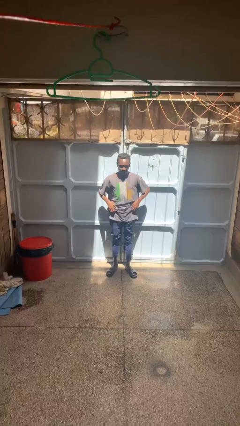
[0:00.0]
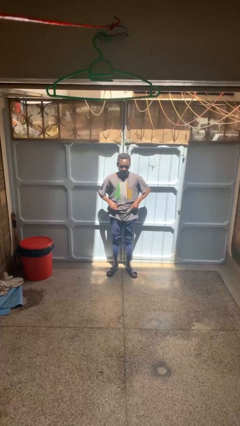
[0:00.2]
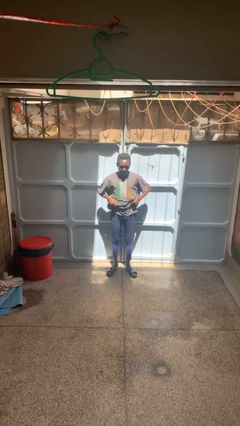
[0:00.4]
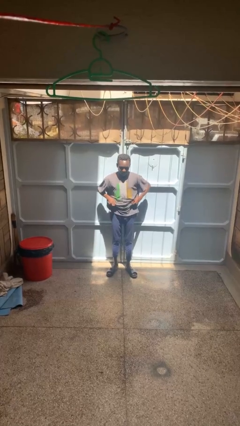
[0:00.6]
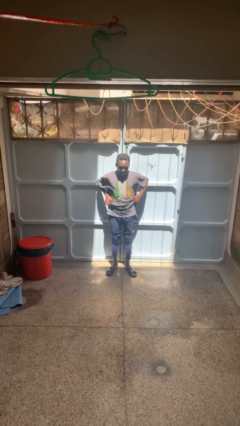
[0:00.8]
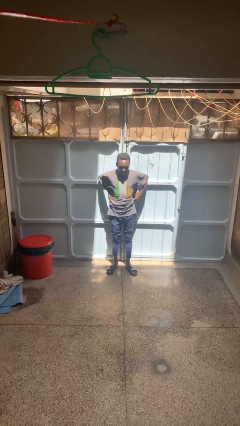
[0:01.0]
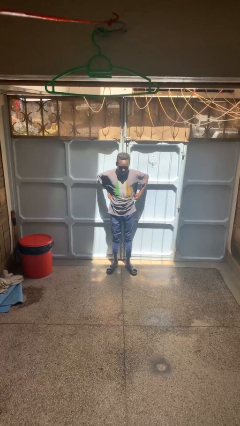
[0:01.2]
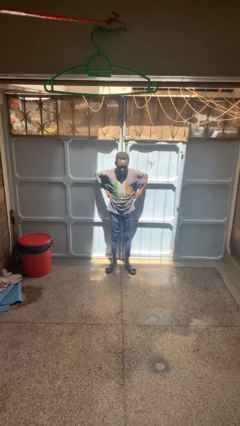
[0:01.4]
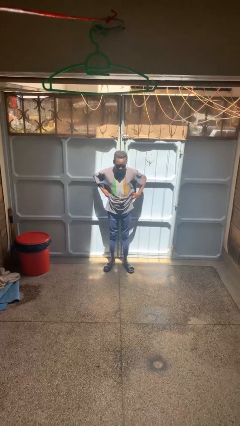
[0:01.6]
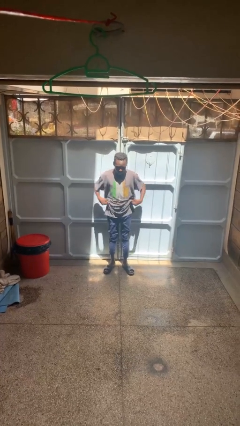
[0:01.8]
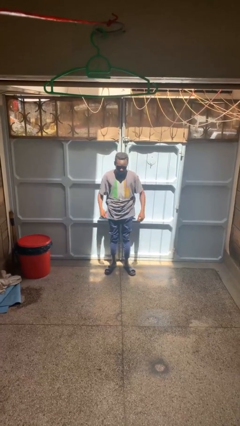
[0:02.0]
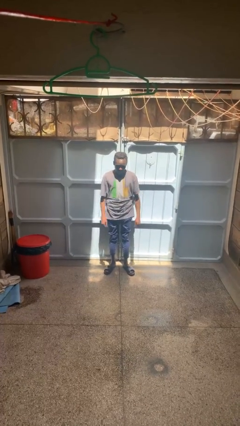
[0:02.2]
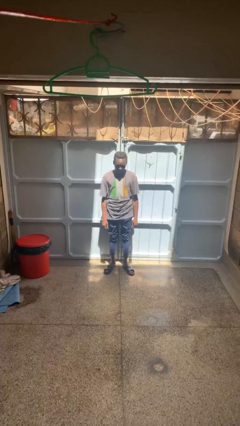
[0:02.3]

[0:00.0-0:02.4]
person hikes up pants

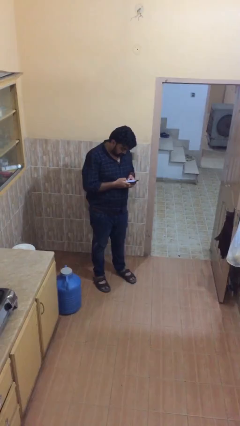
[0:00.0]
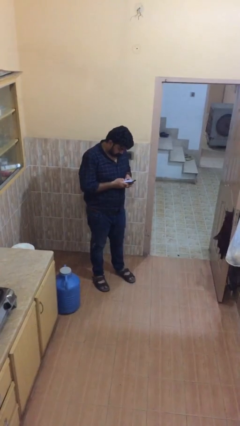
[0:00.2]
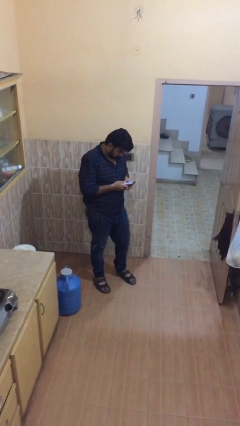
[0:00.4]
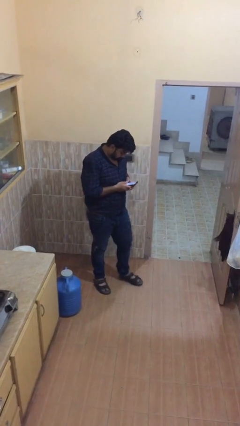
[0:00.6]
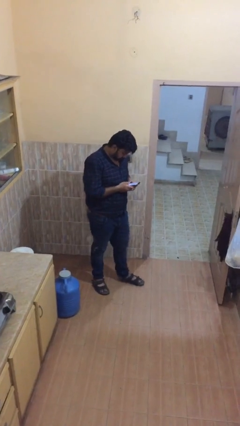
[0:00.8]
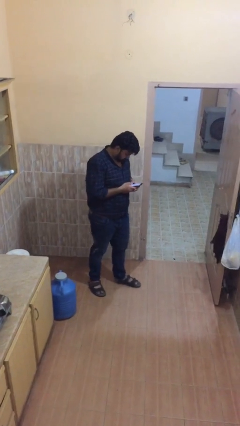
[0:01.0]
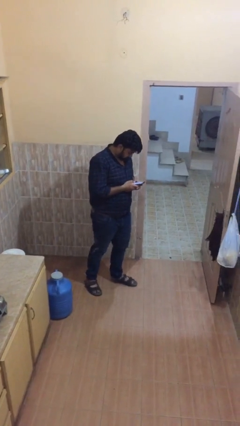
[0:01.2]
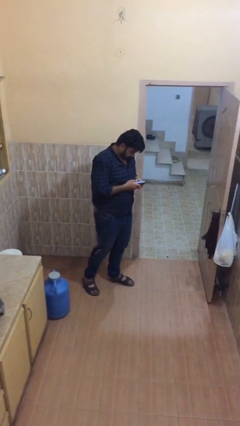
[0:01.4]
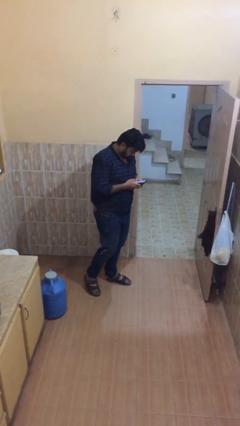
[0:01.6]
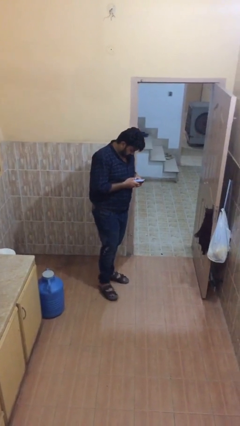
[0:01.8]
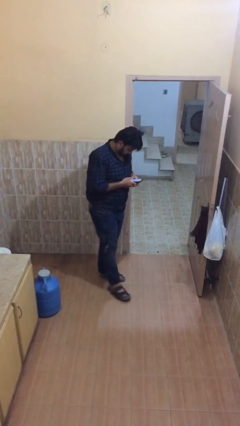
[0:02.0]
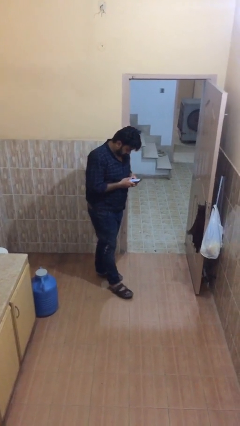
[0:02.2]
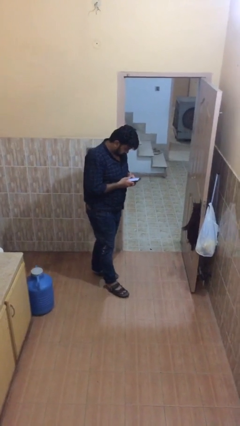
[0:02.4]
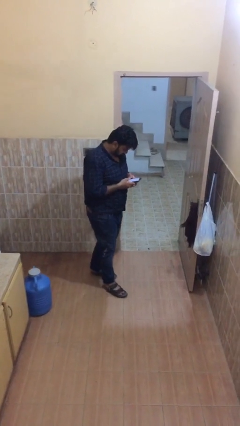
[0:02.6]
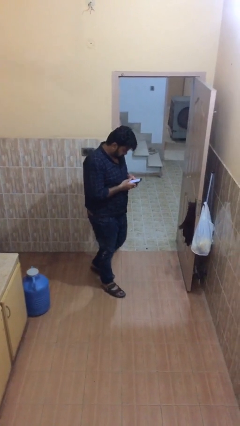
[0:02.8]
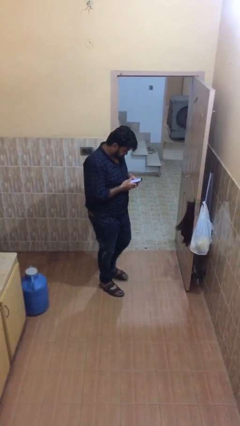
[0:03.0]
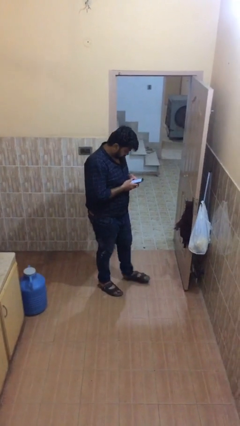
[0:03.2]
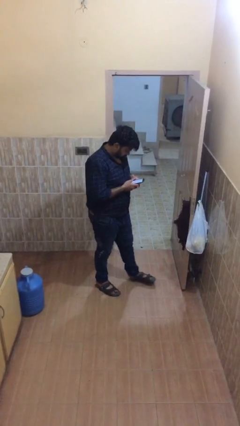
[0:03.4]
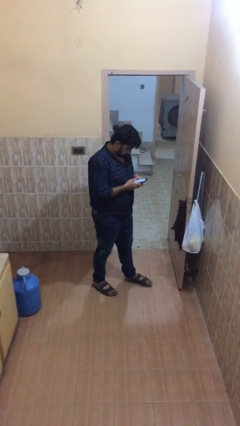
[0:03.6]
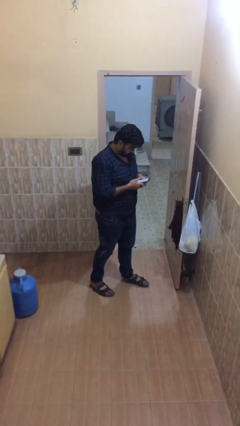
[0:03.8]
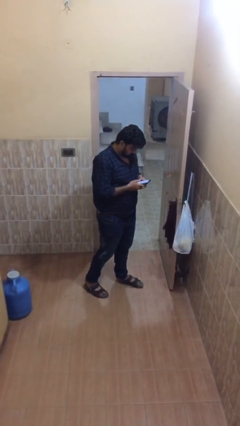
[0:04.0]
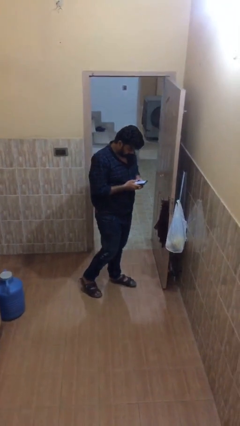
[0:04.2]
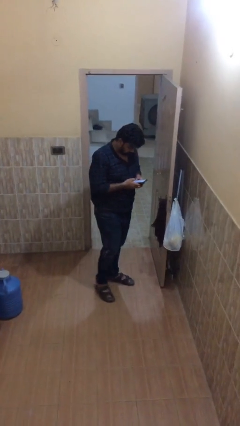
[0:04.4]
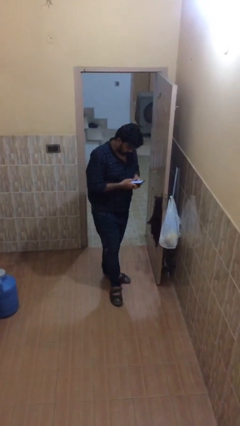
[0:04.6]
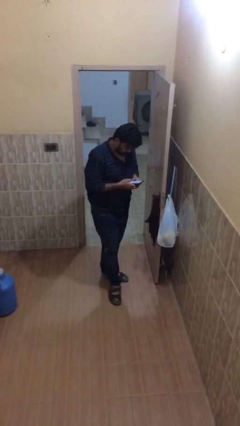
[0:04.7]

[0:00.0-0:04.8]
person texts on phone

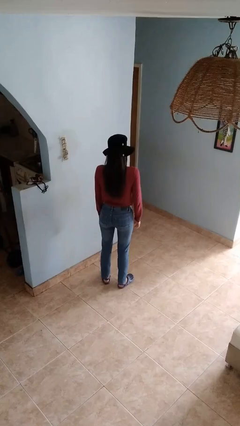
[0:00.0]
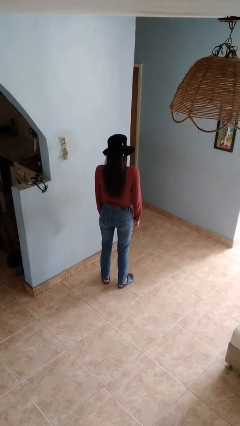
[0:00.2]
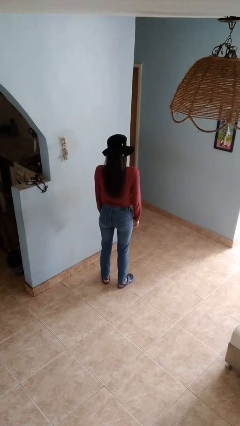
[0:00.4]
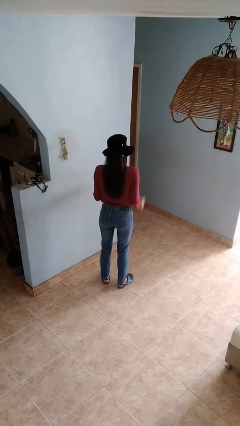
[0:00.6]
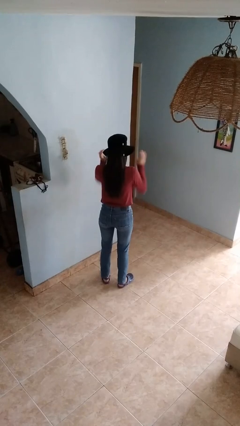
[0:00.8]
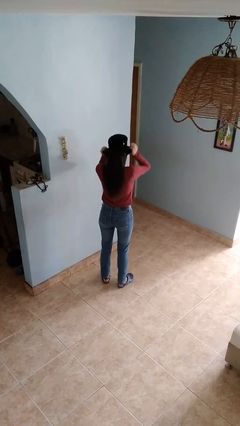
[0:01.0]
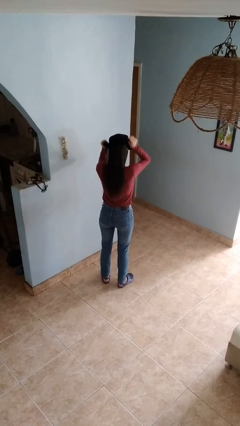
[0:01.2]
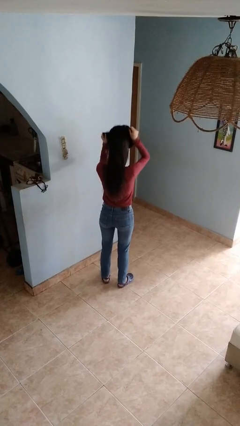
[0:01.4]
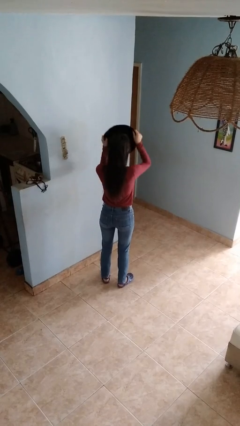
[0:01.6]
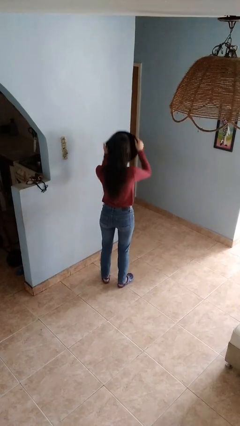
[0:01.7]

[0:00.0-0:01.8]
person takes off hat

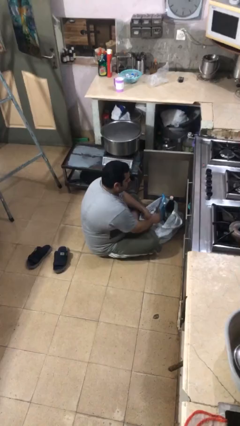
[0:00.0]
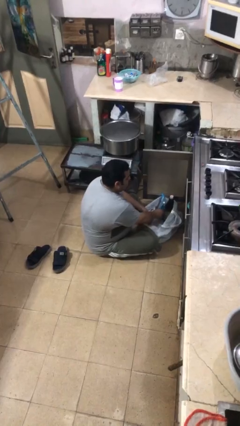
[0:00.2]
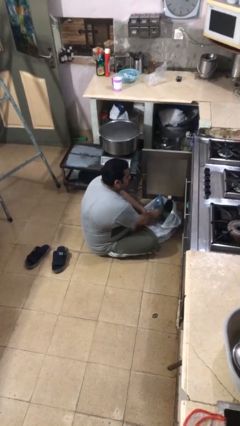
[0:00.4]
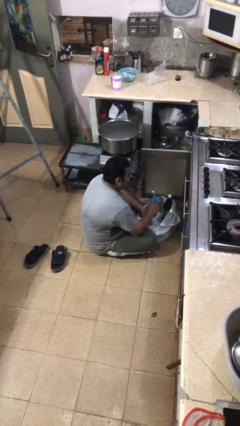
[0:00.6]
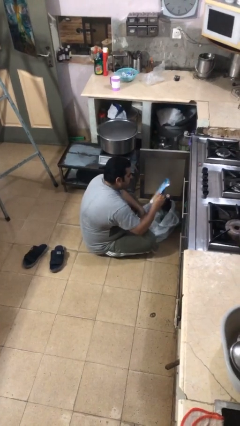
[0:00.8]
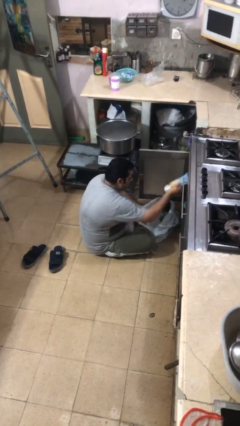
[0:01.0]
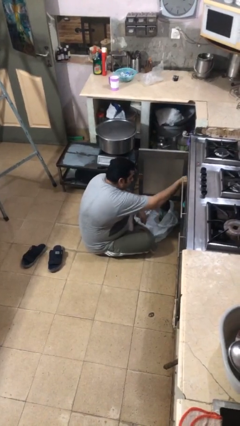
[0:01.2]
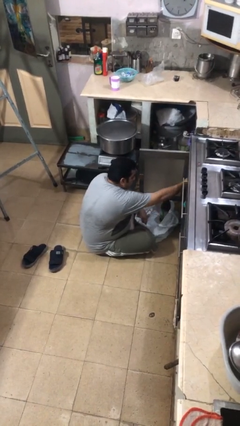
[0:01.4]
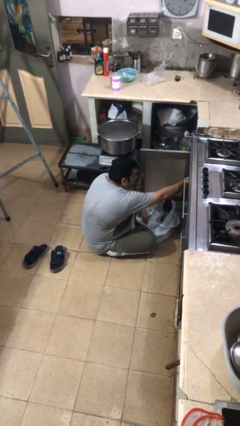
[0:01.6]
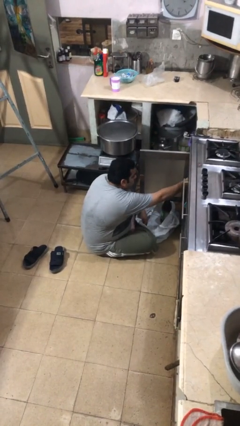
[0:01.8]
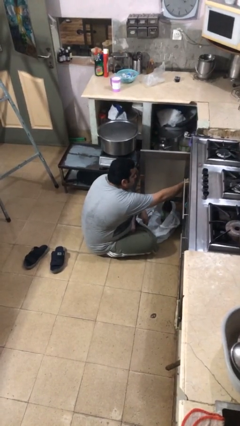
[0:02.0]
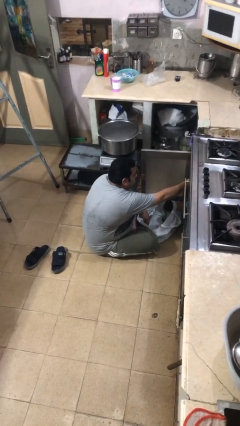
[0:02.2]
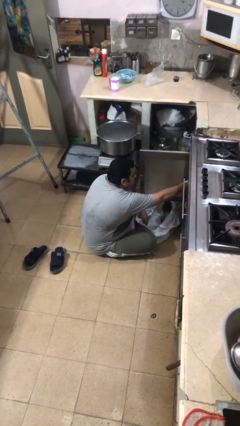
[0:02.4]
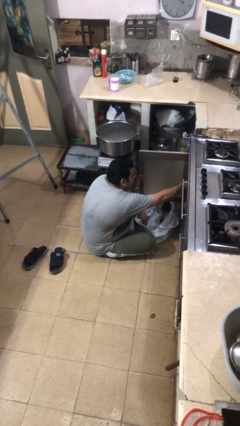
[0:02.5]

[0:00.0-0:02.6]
person loads groceries into cabinet

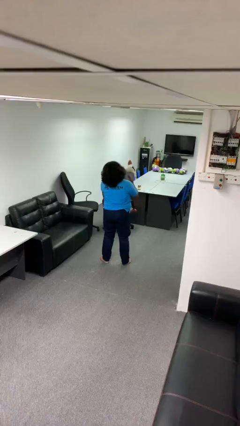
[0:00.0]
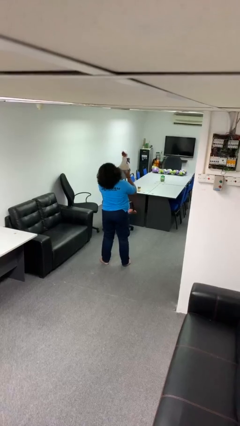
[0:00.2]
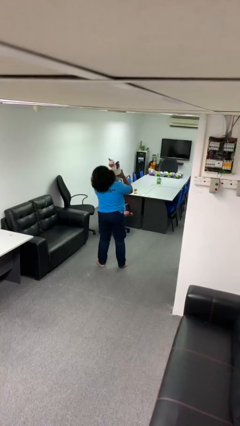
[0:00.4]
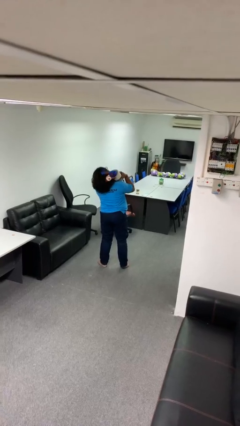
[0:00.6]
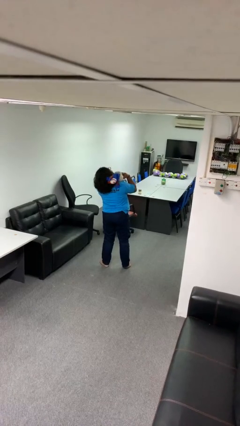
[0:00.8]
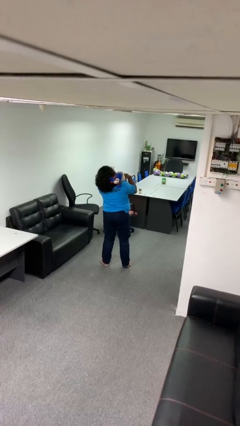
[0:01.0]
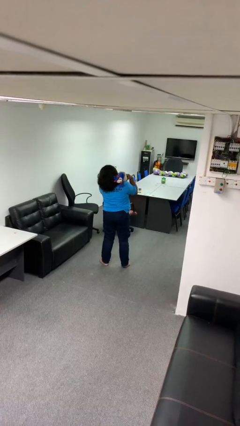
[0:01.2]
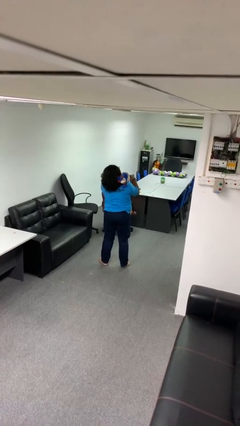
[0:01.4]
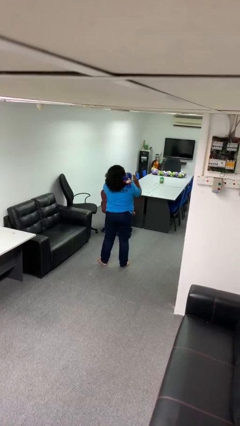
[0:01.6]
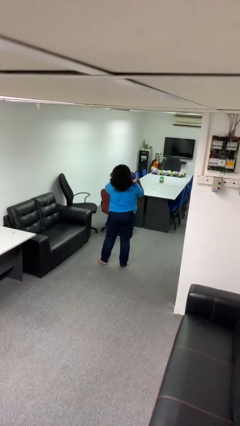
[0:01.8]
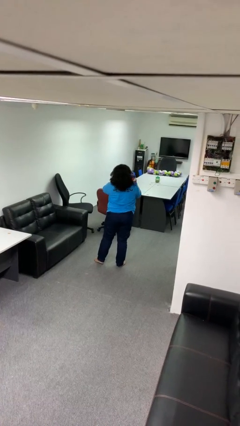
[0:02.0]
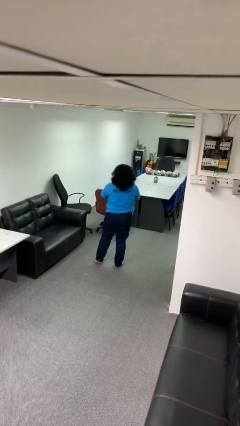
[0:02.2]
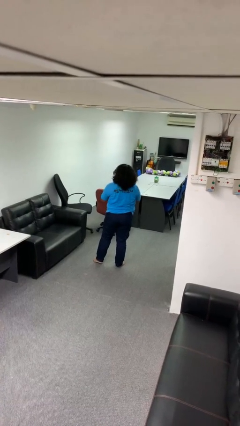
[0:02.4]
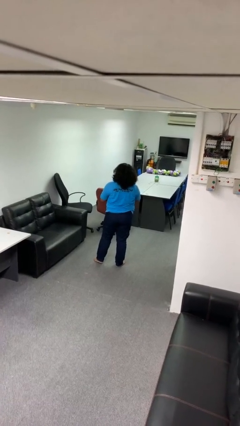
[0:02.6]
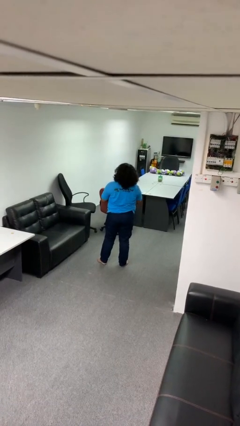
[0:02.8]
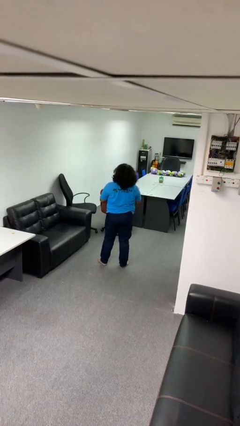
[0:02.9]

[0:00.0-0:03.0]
person hugs stuffed animal

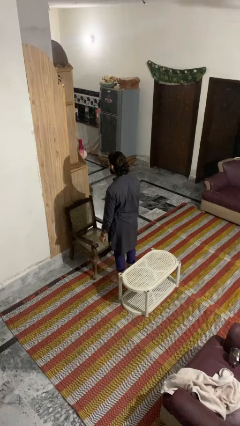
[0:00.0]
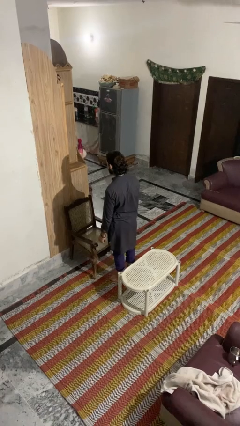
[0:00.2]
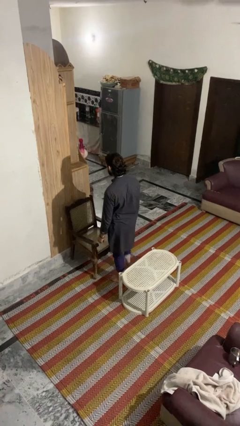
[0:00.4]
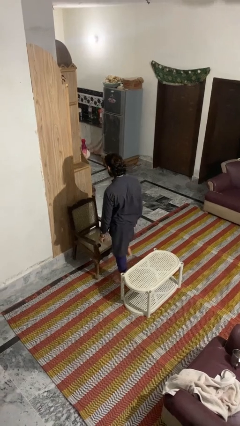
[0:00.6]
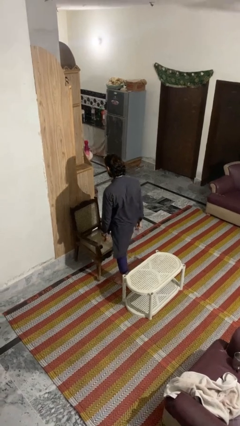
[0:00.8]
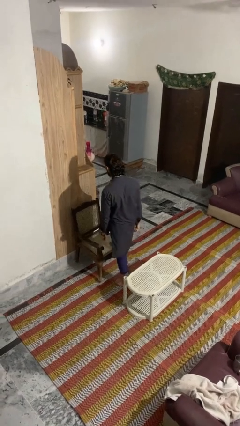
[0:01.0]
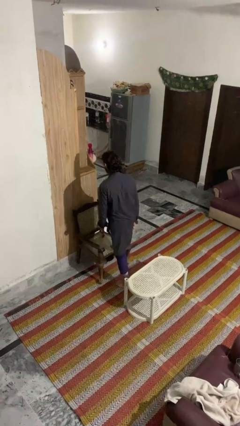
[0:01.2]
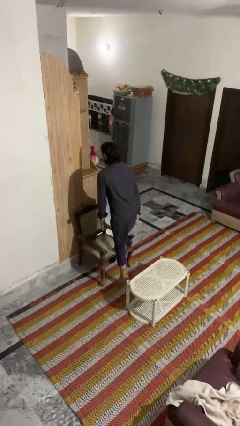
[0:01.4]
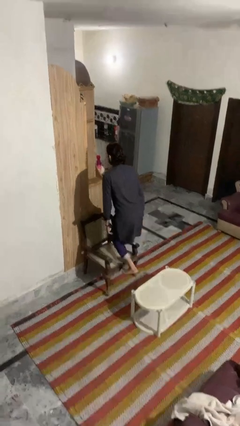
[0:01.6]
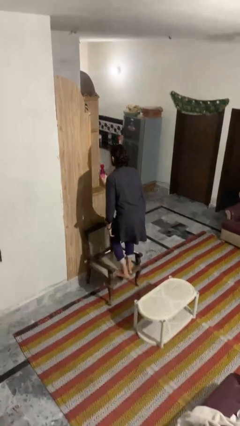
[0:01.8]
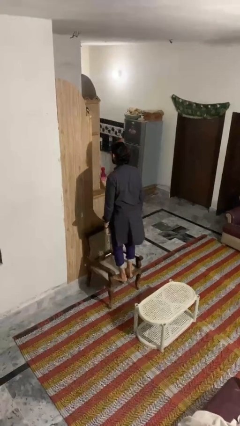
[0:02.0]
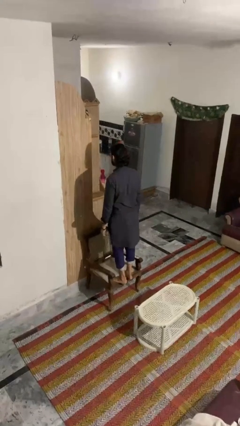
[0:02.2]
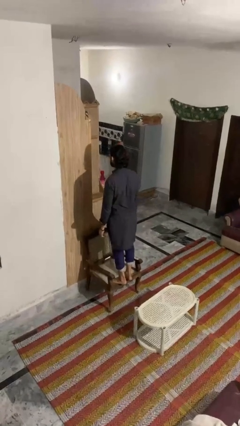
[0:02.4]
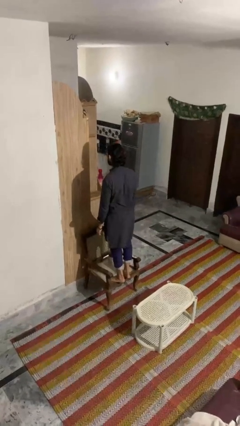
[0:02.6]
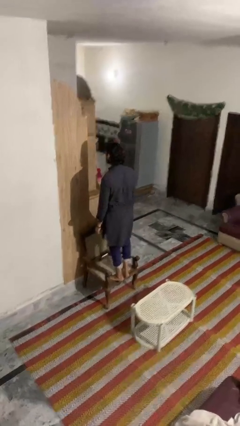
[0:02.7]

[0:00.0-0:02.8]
person climbs on chair
